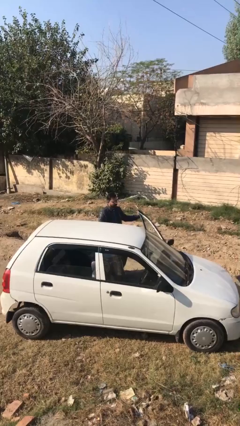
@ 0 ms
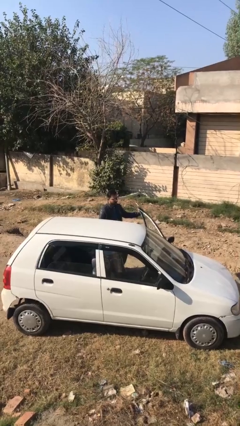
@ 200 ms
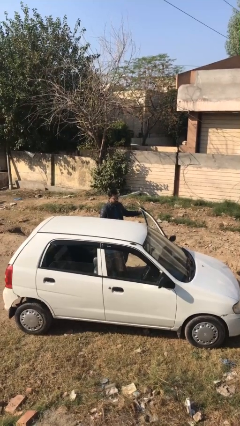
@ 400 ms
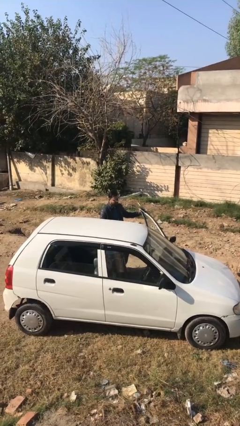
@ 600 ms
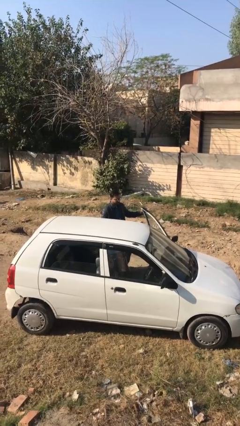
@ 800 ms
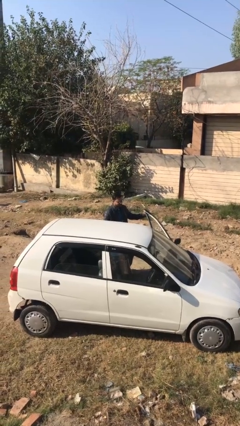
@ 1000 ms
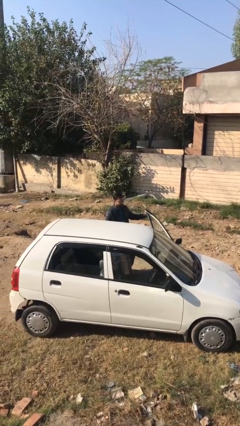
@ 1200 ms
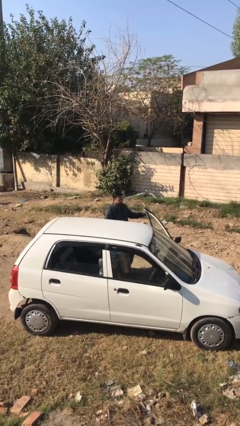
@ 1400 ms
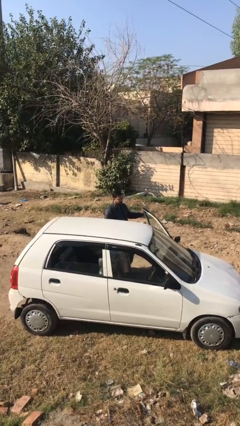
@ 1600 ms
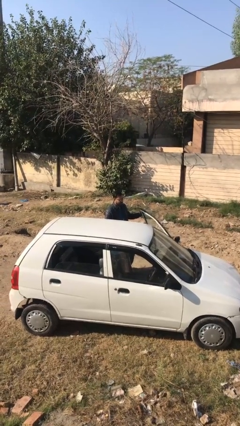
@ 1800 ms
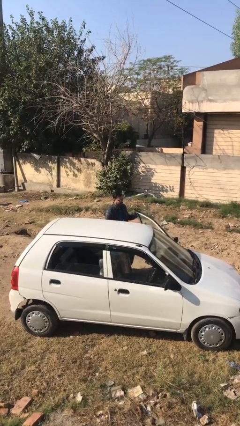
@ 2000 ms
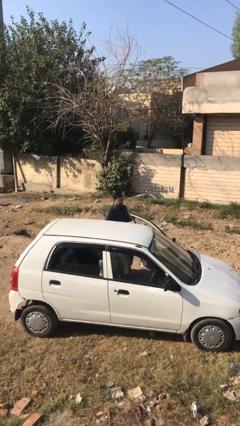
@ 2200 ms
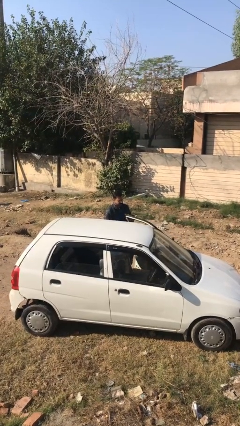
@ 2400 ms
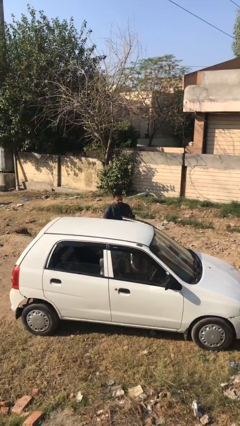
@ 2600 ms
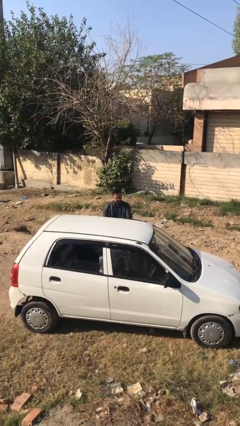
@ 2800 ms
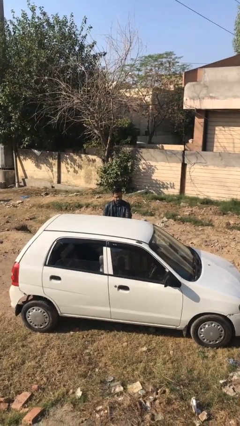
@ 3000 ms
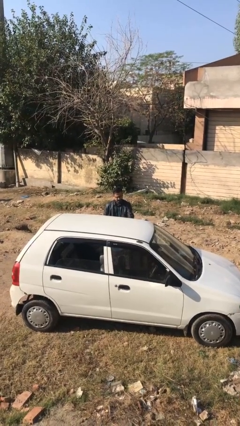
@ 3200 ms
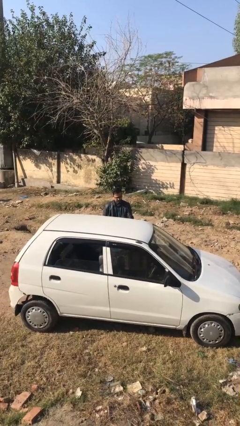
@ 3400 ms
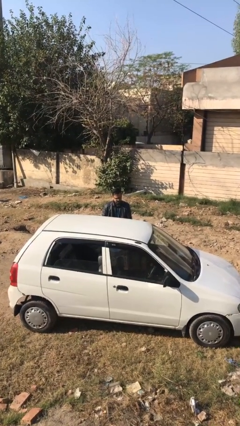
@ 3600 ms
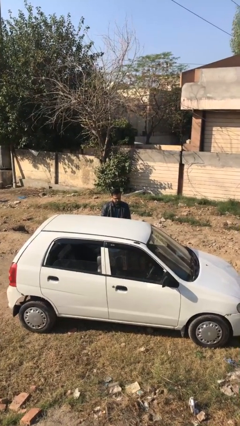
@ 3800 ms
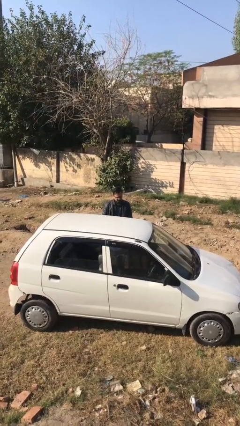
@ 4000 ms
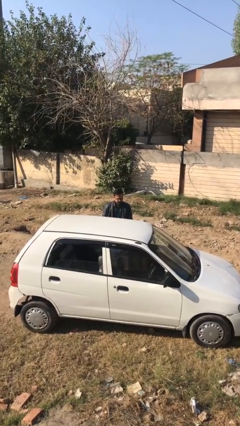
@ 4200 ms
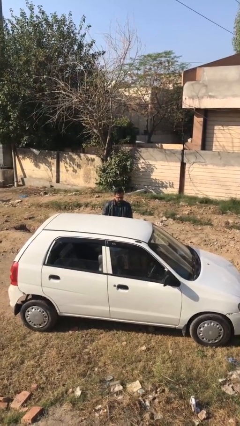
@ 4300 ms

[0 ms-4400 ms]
person closes car door

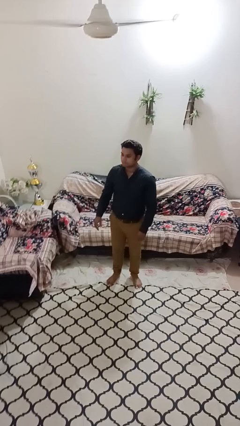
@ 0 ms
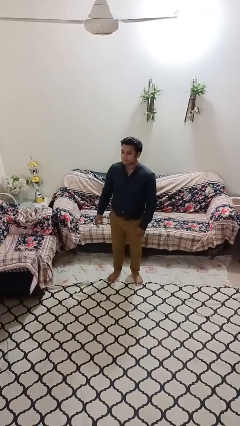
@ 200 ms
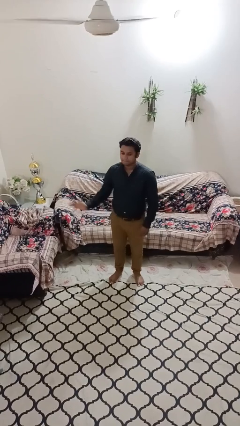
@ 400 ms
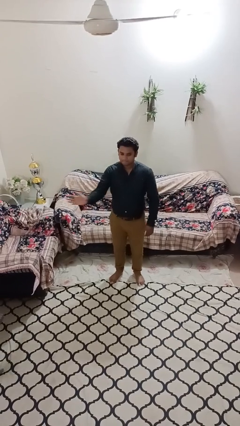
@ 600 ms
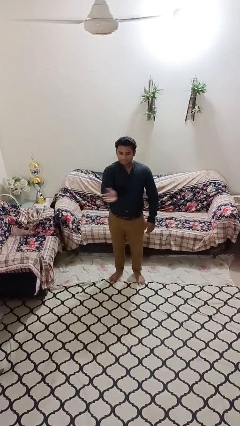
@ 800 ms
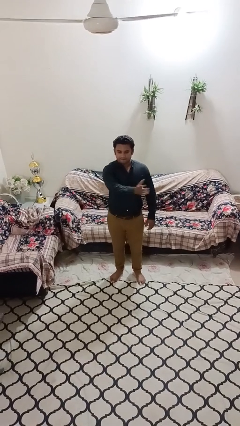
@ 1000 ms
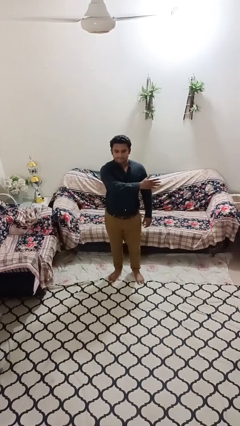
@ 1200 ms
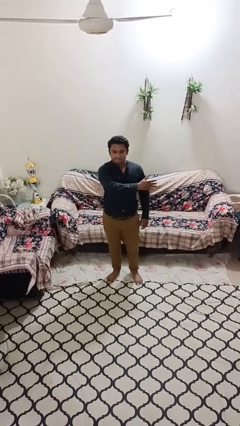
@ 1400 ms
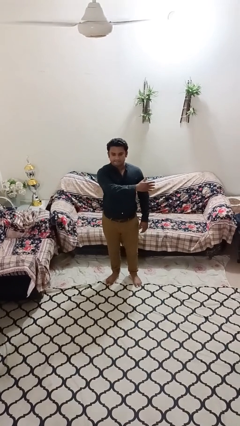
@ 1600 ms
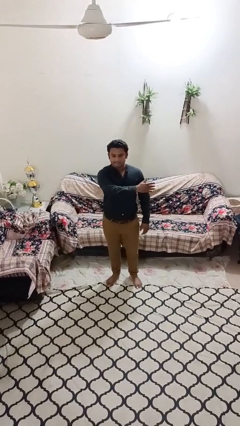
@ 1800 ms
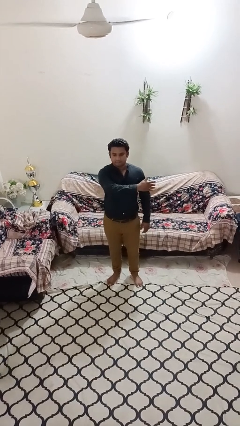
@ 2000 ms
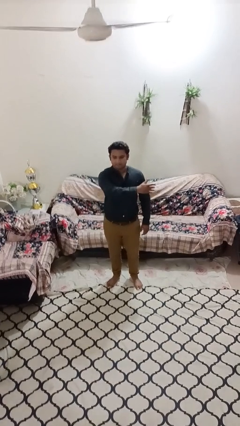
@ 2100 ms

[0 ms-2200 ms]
person gestures swipe left

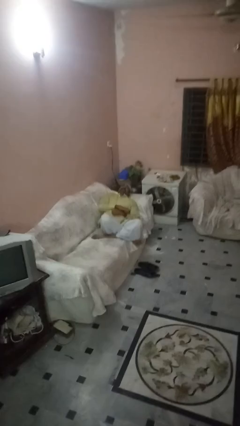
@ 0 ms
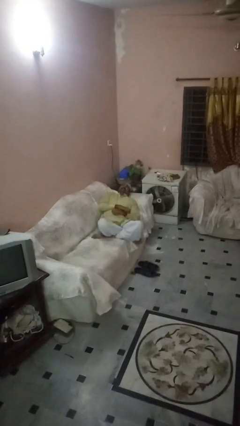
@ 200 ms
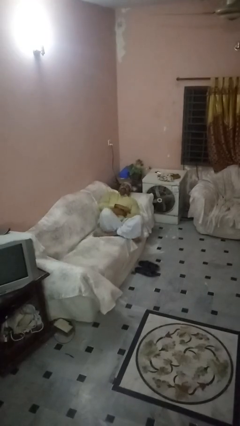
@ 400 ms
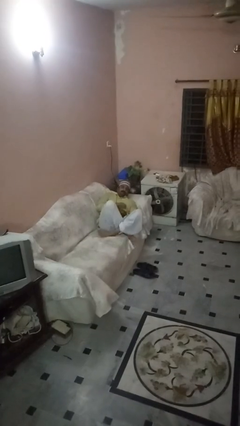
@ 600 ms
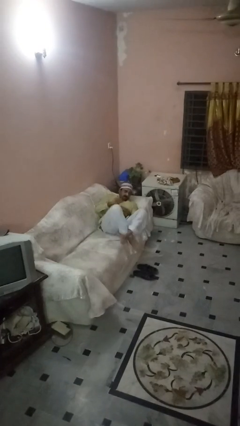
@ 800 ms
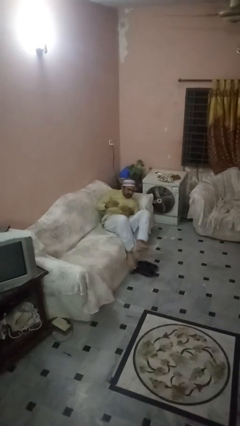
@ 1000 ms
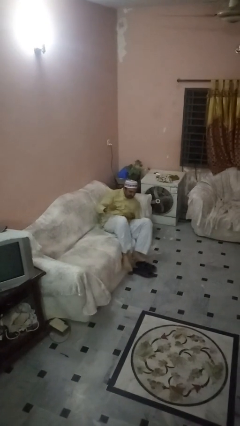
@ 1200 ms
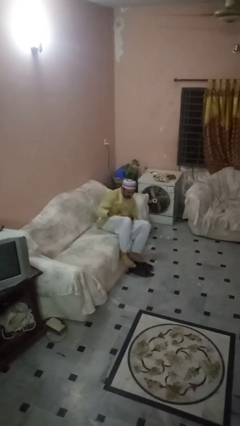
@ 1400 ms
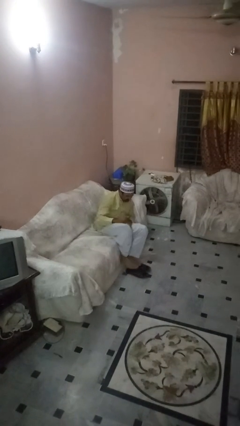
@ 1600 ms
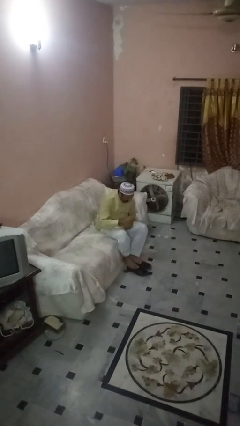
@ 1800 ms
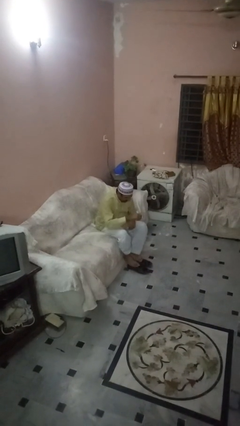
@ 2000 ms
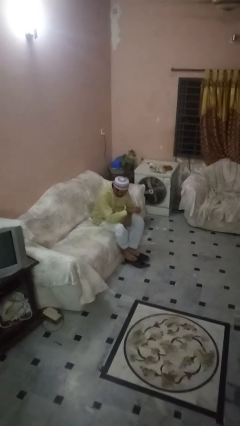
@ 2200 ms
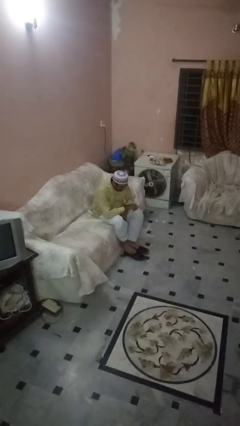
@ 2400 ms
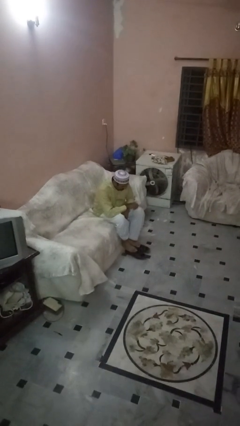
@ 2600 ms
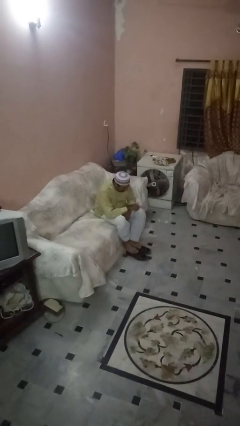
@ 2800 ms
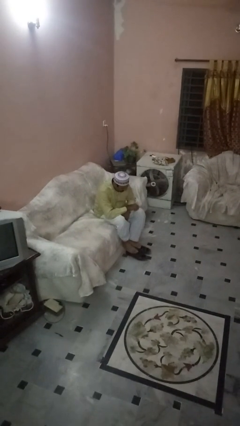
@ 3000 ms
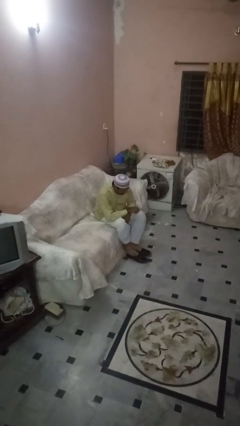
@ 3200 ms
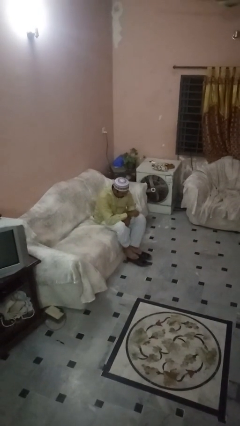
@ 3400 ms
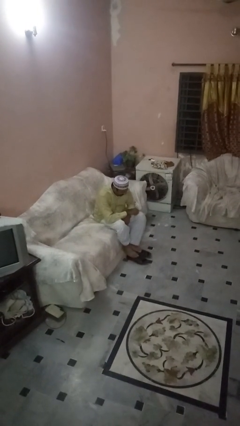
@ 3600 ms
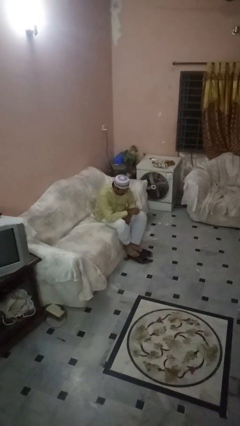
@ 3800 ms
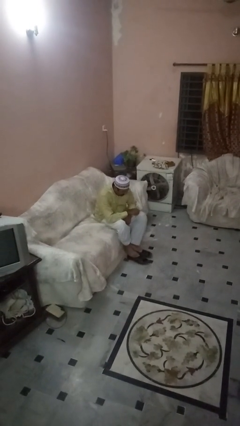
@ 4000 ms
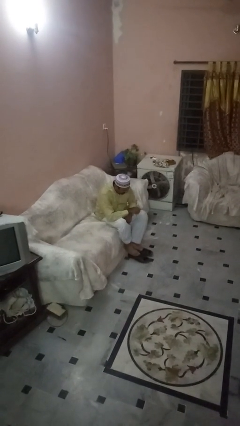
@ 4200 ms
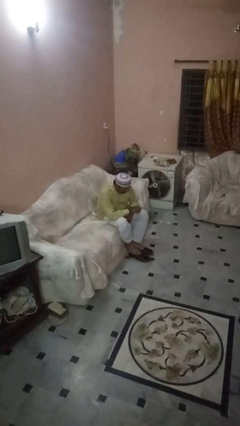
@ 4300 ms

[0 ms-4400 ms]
person stands up

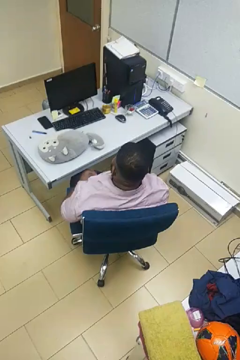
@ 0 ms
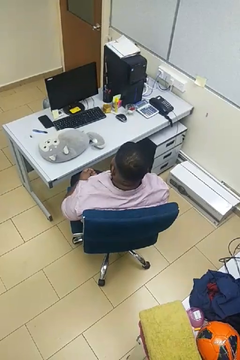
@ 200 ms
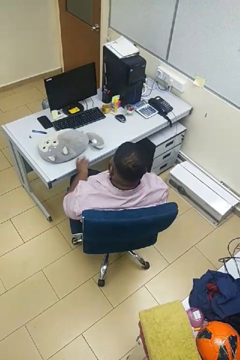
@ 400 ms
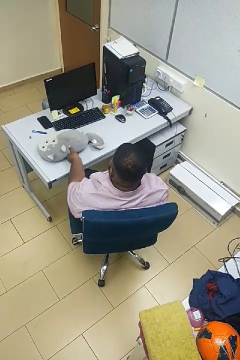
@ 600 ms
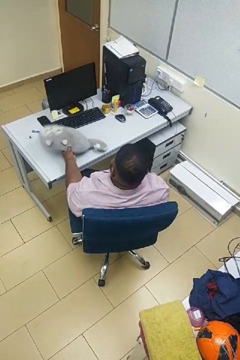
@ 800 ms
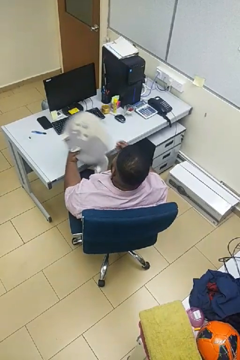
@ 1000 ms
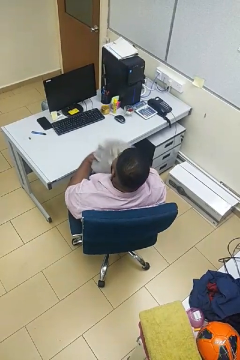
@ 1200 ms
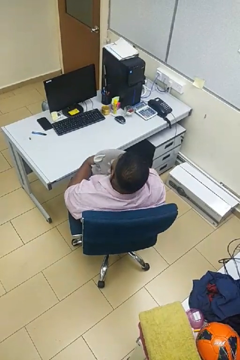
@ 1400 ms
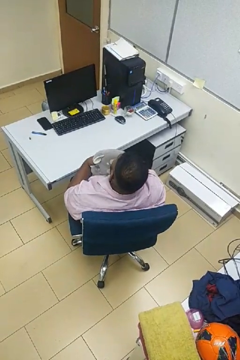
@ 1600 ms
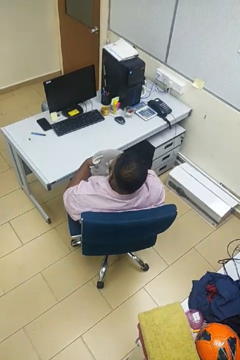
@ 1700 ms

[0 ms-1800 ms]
person hugs stuffed animal

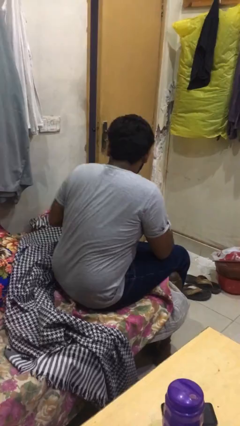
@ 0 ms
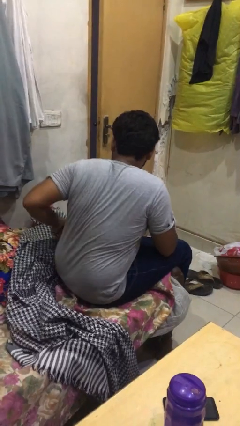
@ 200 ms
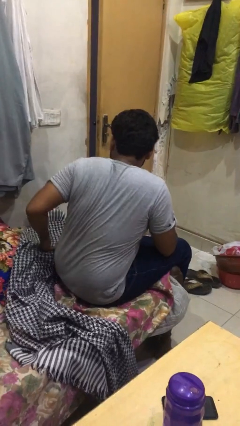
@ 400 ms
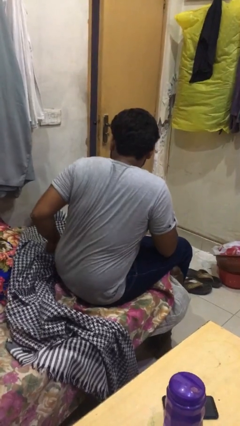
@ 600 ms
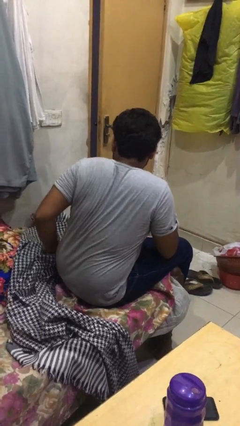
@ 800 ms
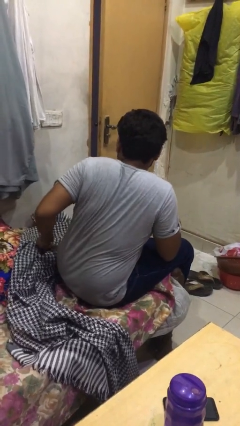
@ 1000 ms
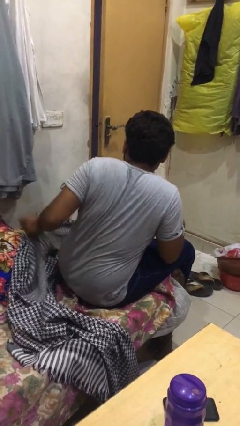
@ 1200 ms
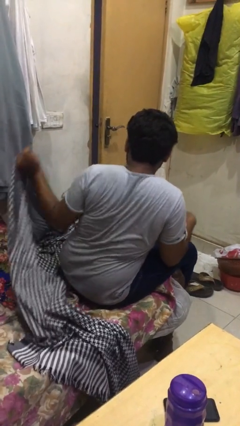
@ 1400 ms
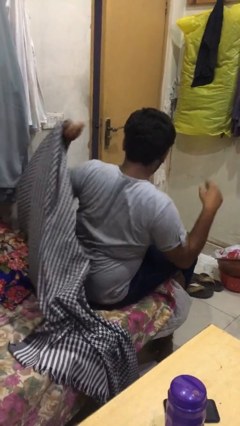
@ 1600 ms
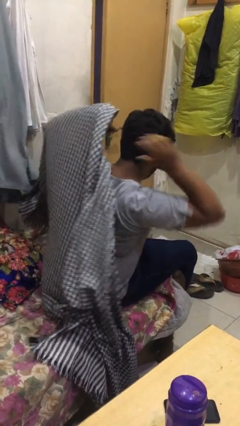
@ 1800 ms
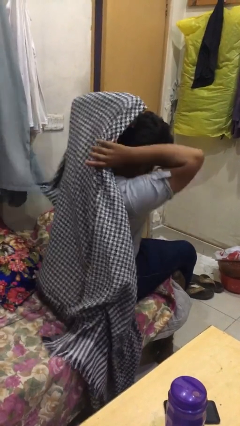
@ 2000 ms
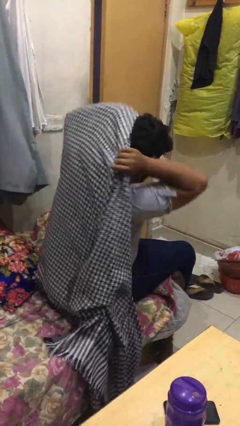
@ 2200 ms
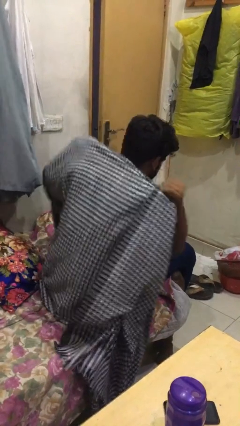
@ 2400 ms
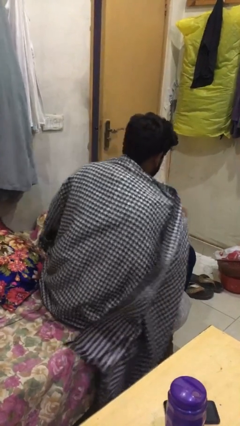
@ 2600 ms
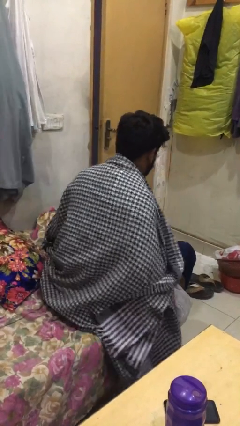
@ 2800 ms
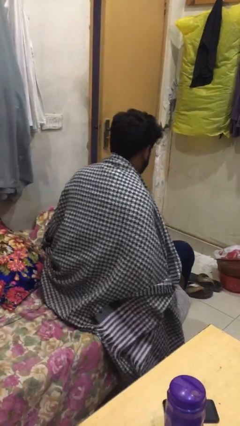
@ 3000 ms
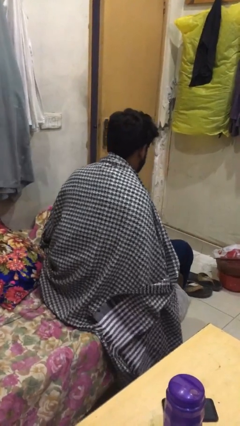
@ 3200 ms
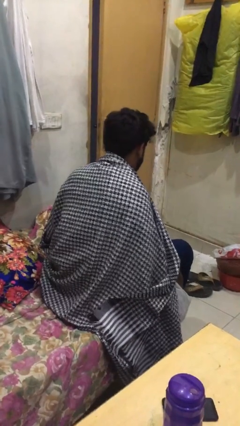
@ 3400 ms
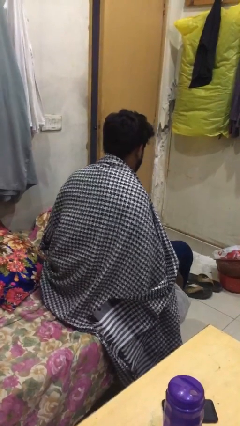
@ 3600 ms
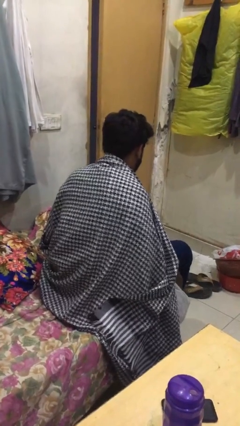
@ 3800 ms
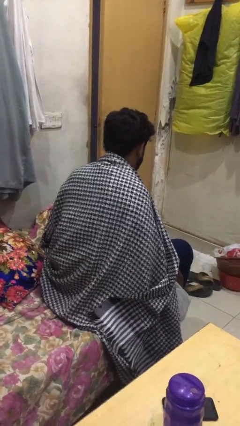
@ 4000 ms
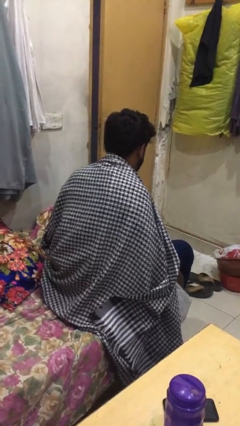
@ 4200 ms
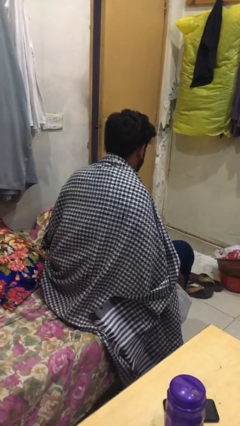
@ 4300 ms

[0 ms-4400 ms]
person covers with blanket

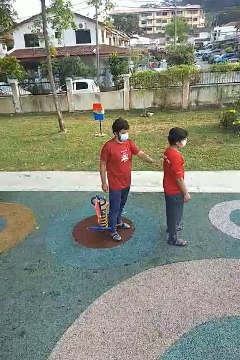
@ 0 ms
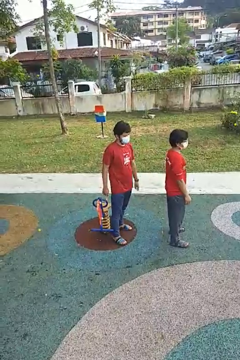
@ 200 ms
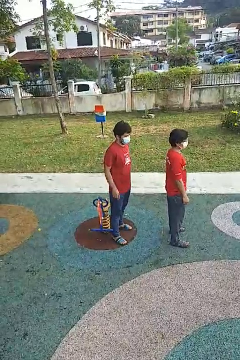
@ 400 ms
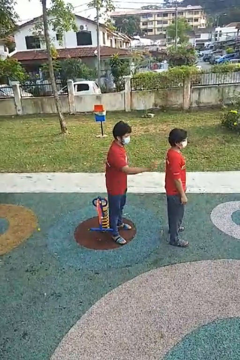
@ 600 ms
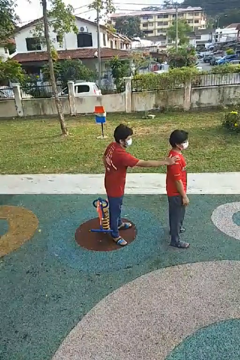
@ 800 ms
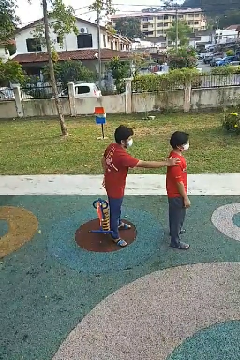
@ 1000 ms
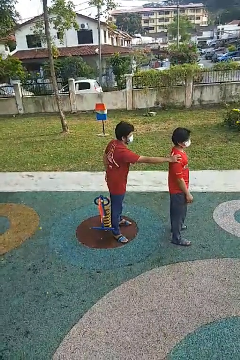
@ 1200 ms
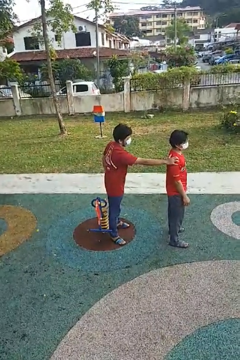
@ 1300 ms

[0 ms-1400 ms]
person grabs person by shoulder
